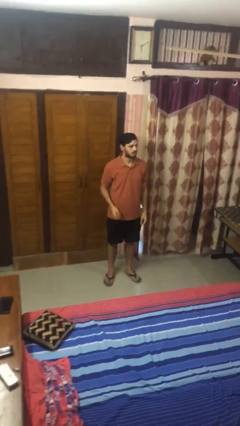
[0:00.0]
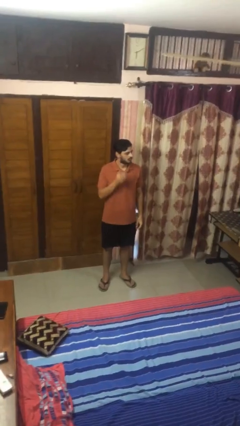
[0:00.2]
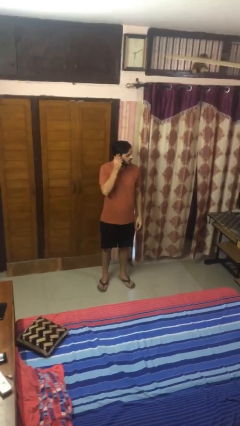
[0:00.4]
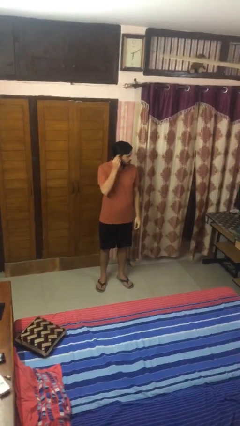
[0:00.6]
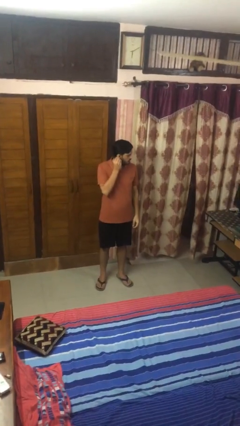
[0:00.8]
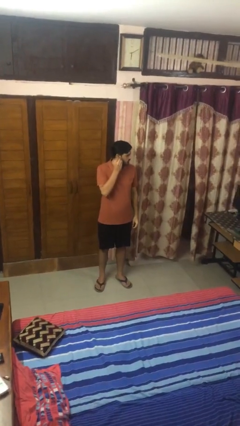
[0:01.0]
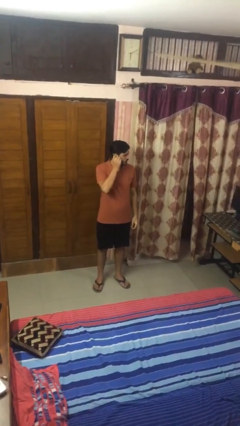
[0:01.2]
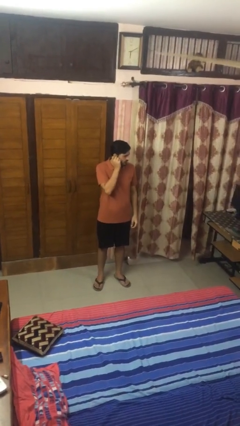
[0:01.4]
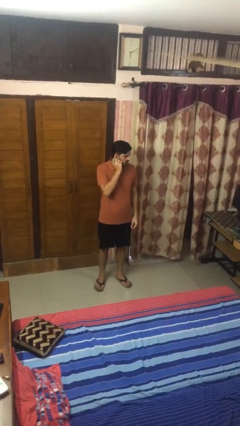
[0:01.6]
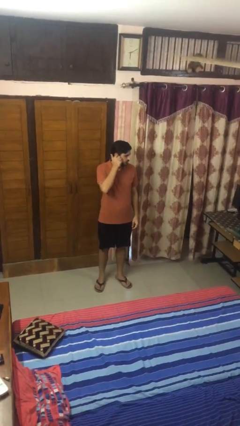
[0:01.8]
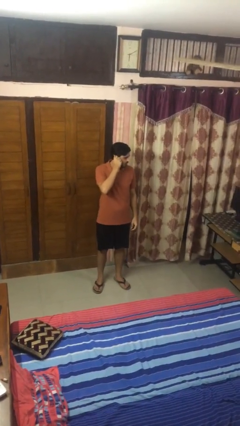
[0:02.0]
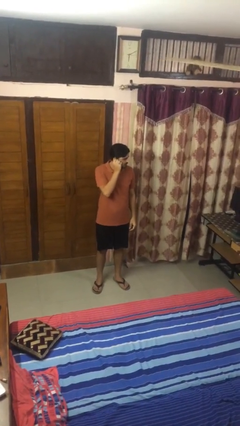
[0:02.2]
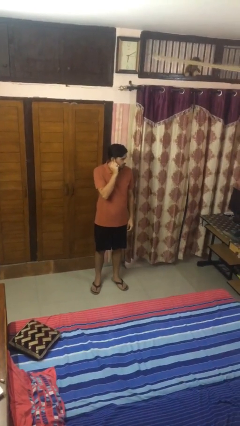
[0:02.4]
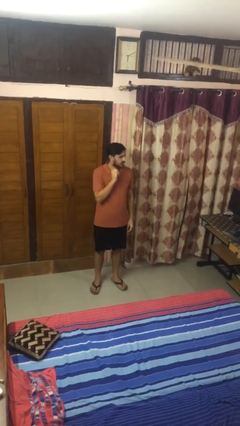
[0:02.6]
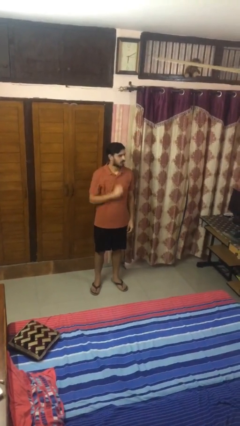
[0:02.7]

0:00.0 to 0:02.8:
person touches earlobe

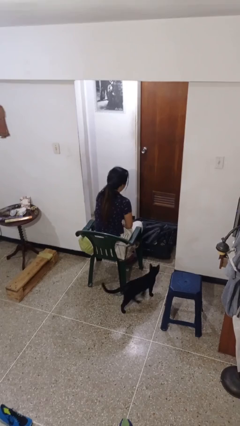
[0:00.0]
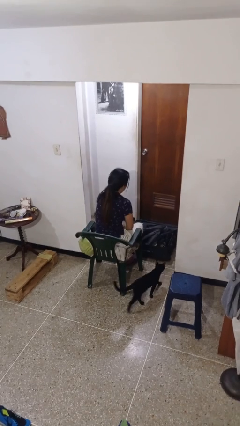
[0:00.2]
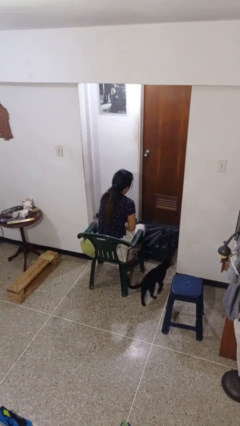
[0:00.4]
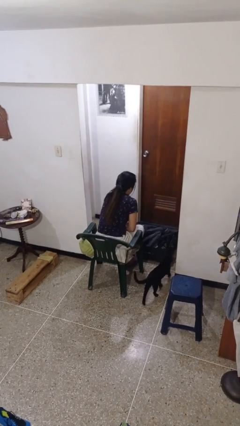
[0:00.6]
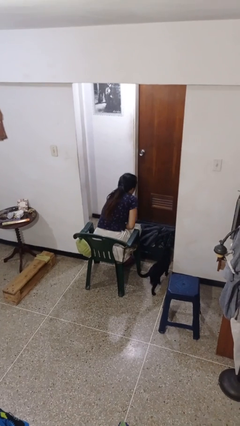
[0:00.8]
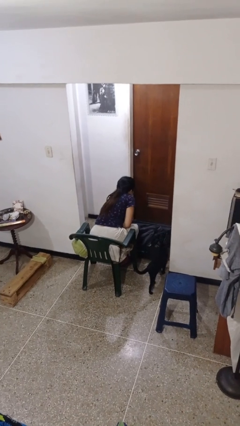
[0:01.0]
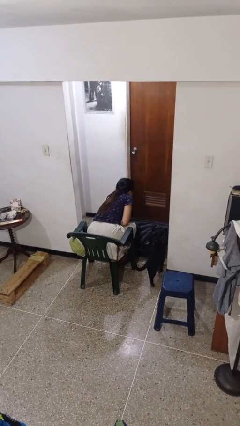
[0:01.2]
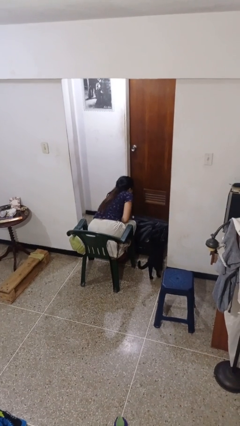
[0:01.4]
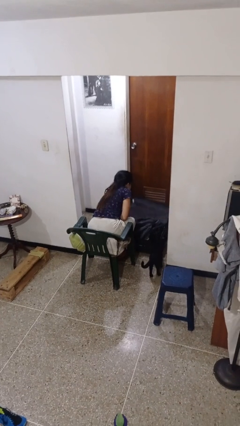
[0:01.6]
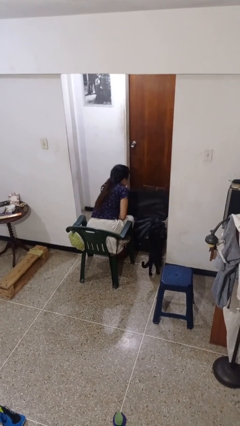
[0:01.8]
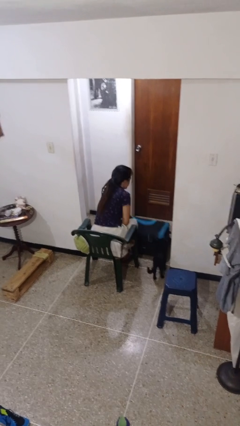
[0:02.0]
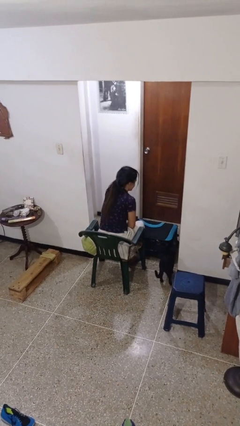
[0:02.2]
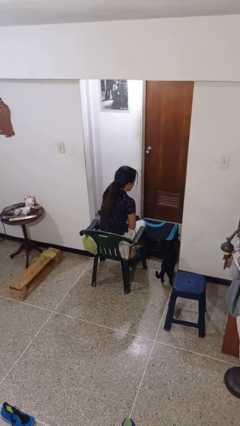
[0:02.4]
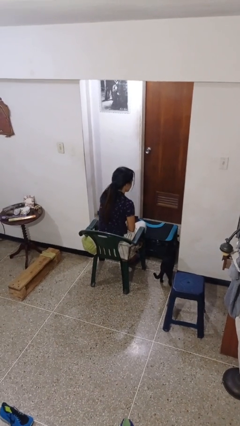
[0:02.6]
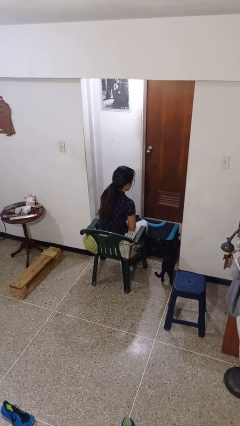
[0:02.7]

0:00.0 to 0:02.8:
person closes suitcase

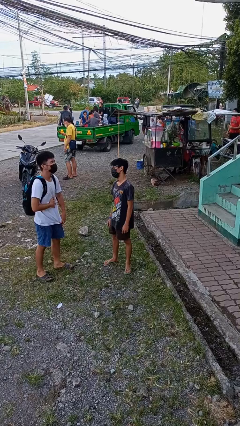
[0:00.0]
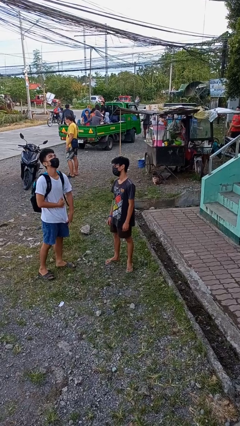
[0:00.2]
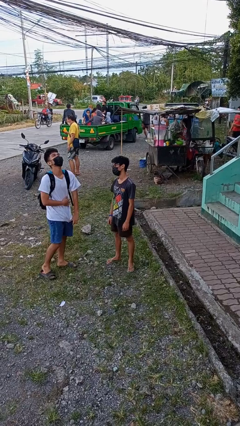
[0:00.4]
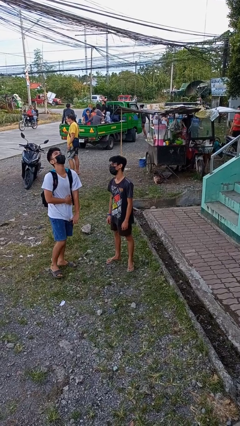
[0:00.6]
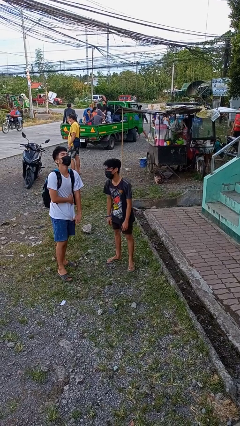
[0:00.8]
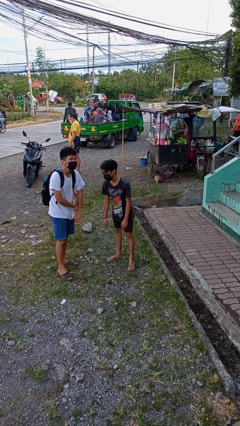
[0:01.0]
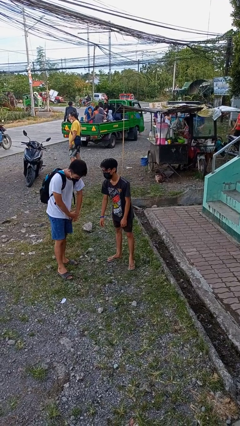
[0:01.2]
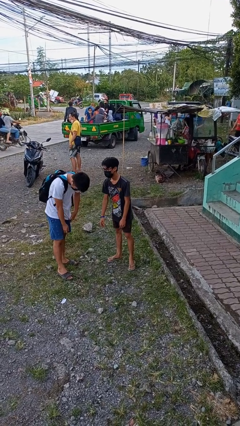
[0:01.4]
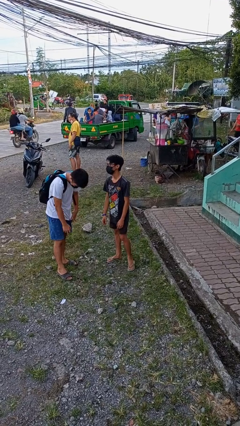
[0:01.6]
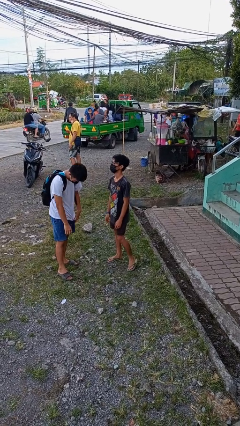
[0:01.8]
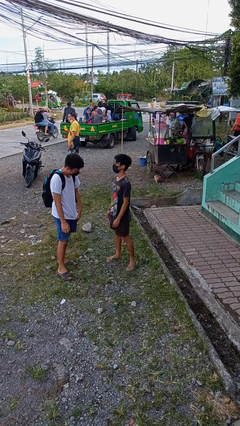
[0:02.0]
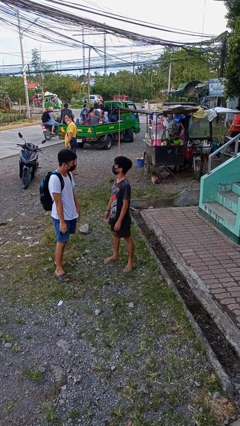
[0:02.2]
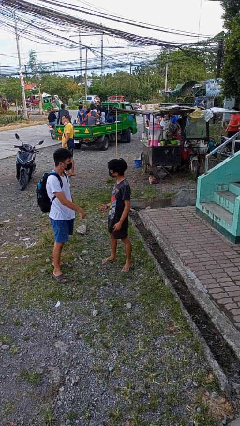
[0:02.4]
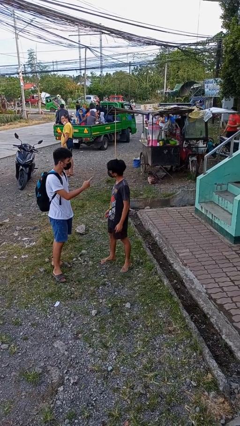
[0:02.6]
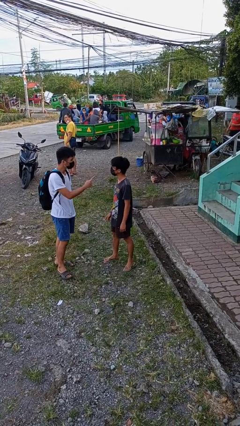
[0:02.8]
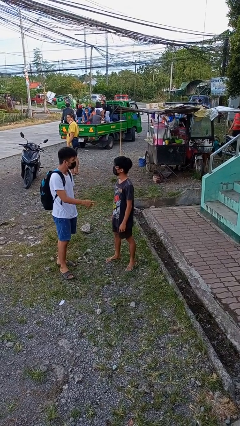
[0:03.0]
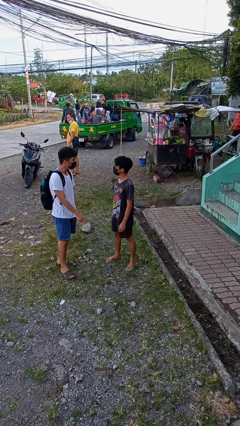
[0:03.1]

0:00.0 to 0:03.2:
person laughs with person

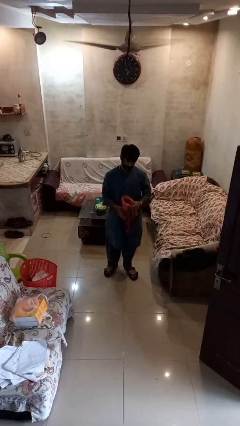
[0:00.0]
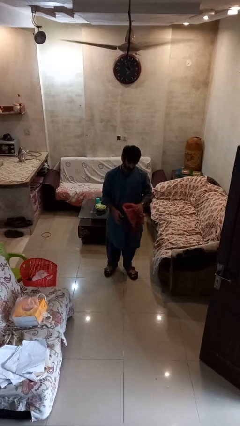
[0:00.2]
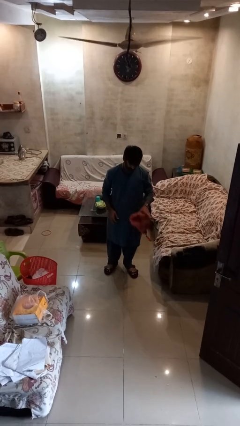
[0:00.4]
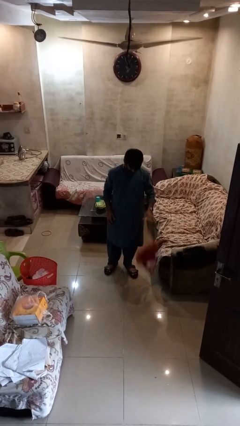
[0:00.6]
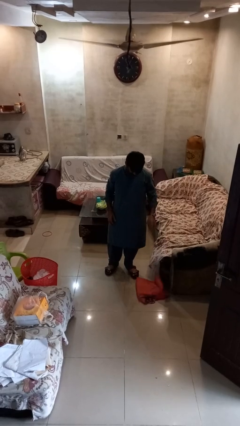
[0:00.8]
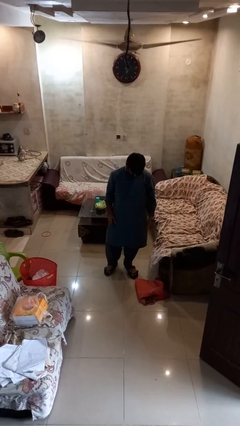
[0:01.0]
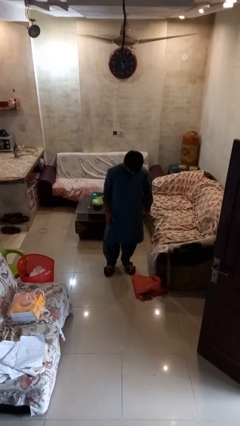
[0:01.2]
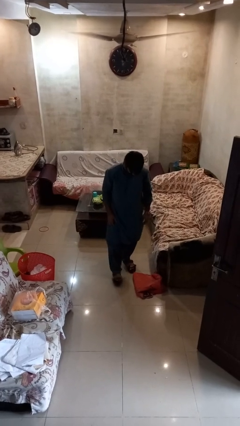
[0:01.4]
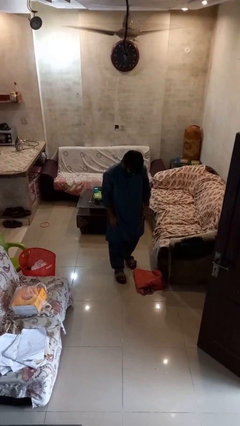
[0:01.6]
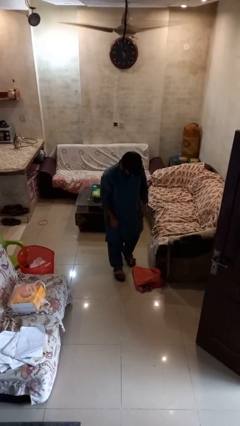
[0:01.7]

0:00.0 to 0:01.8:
person drops object

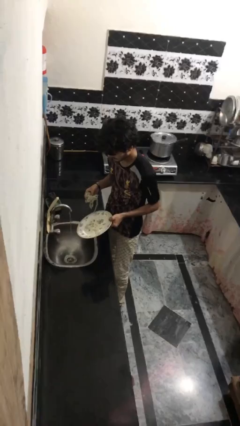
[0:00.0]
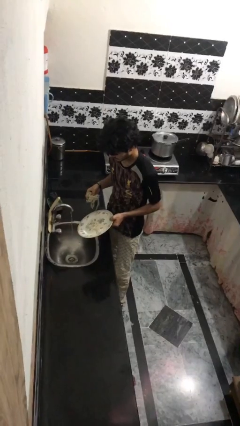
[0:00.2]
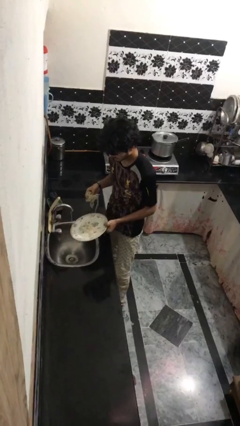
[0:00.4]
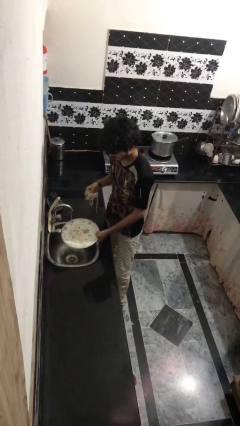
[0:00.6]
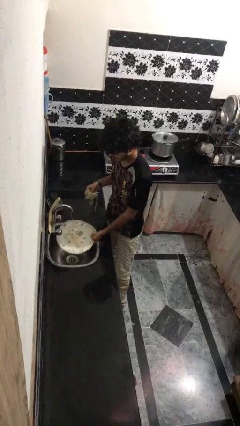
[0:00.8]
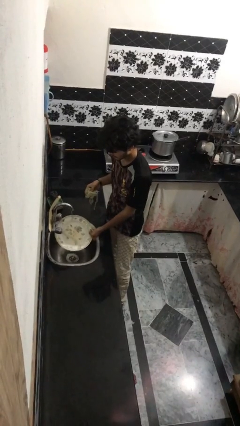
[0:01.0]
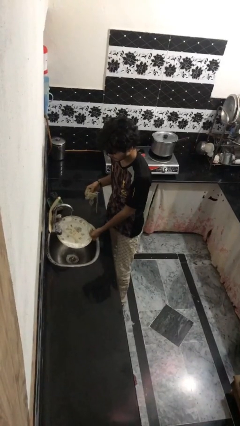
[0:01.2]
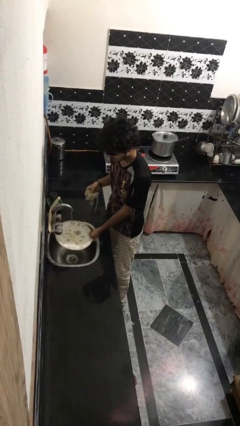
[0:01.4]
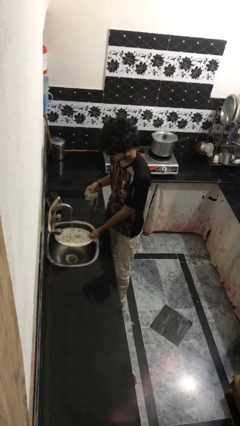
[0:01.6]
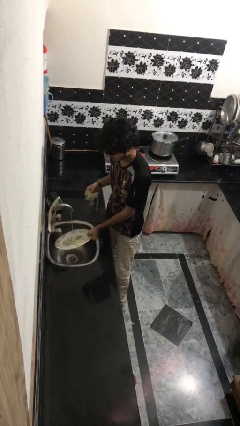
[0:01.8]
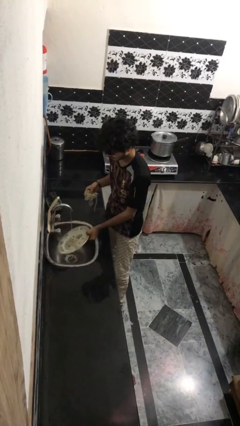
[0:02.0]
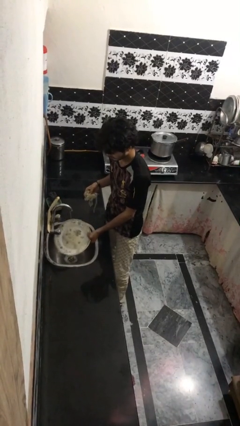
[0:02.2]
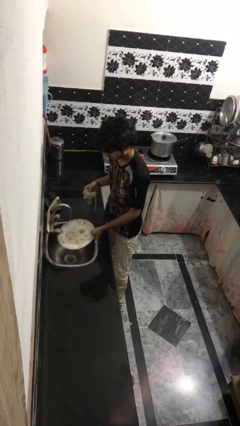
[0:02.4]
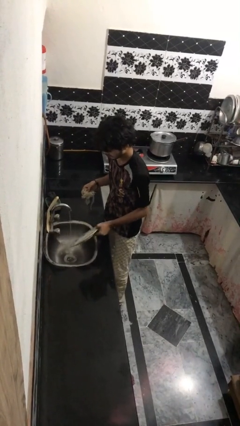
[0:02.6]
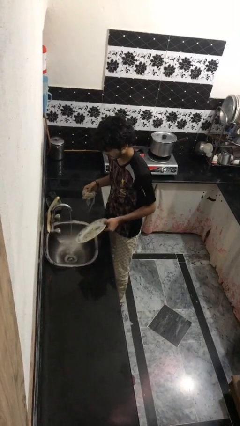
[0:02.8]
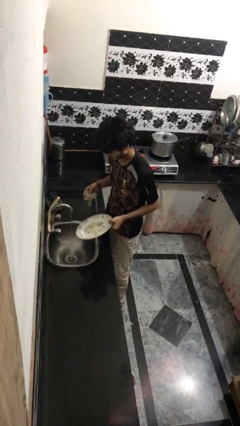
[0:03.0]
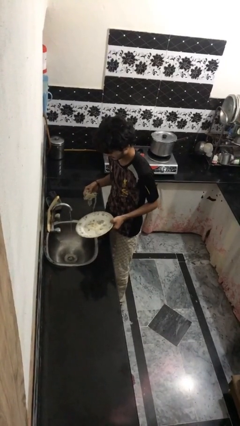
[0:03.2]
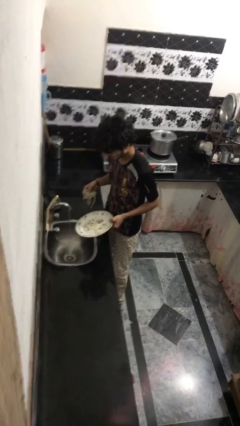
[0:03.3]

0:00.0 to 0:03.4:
person washes dish

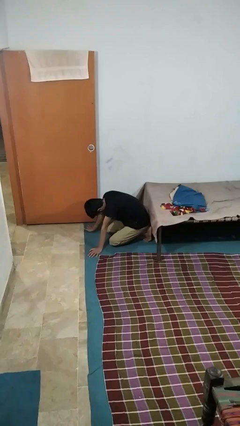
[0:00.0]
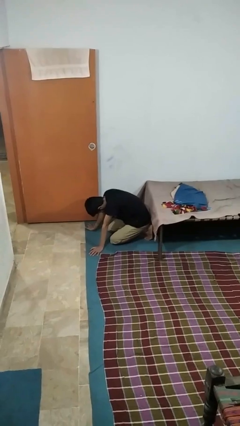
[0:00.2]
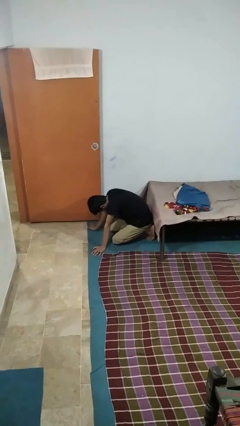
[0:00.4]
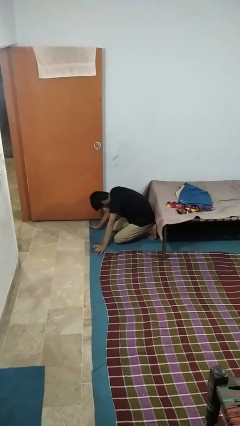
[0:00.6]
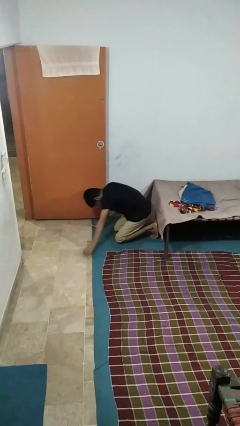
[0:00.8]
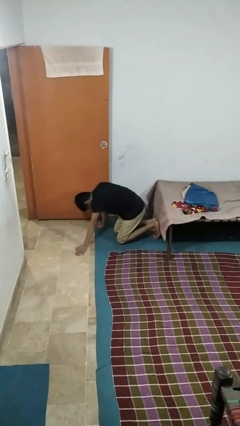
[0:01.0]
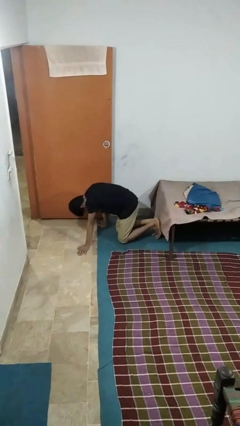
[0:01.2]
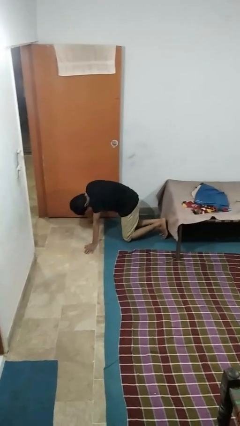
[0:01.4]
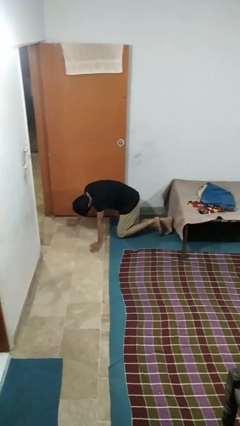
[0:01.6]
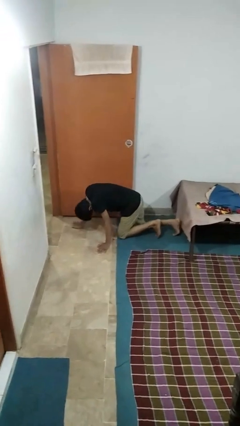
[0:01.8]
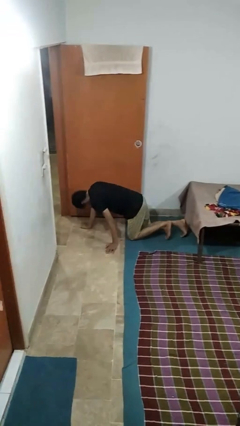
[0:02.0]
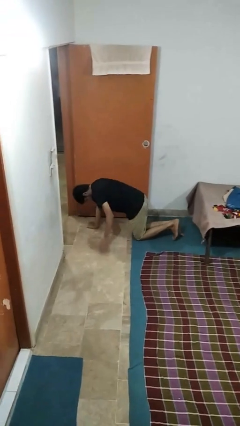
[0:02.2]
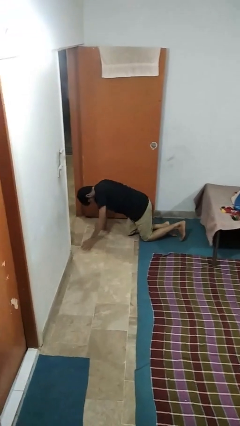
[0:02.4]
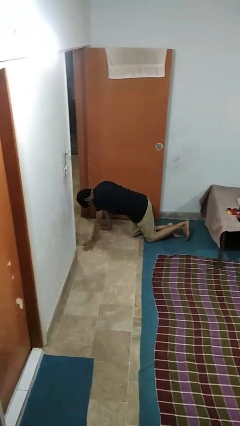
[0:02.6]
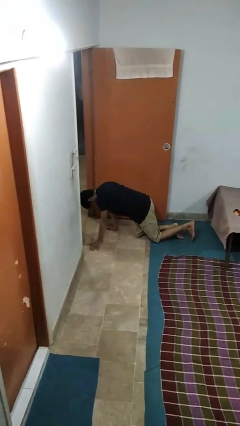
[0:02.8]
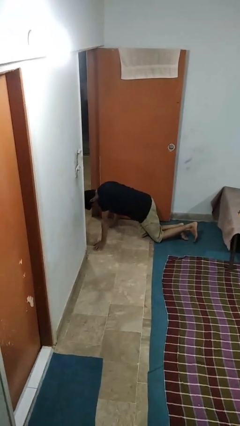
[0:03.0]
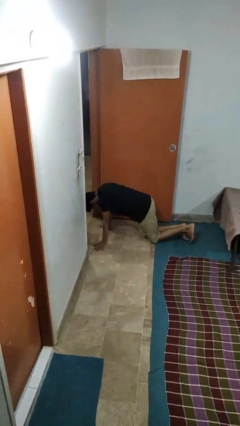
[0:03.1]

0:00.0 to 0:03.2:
person crawls

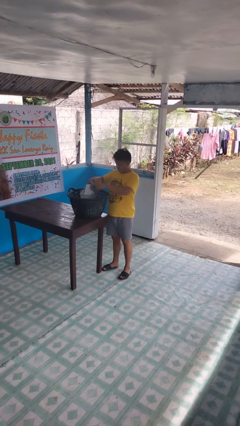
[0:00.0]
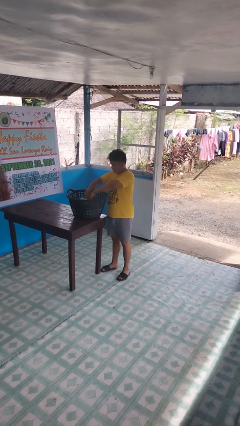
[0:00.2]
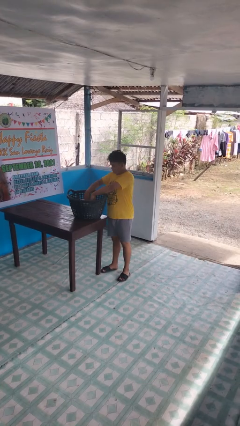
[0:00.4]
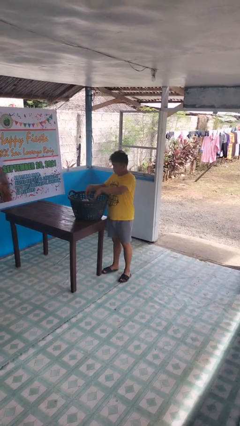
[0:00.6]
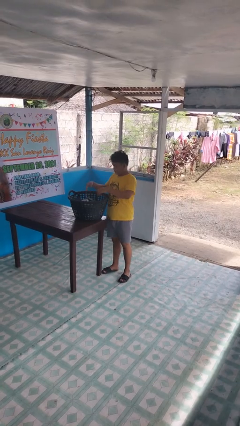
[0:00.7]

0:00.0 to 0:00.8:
person puts object into basket
